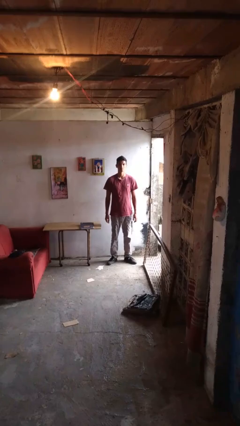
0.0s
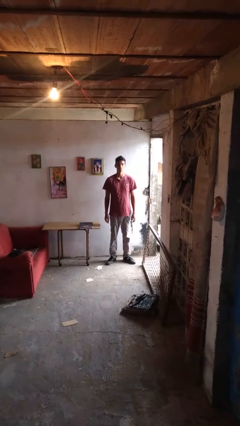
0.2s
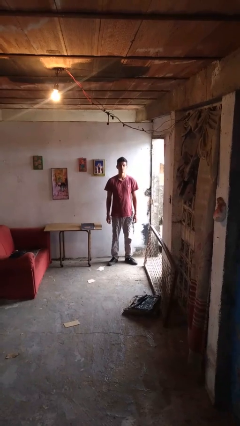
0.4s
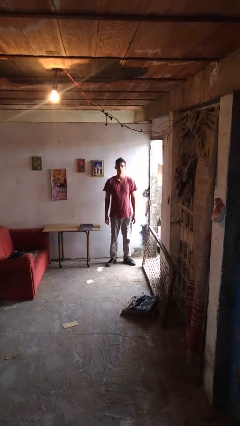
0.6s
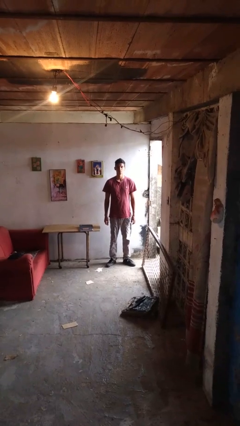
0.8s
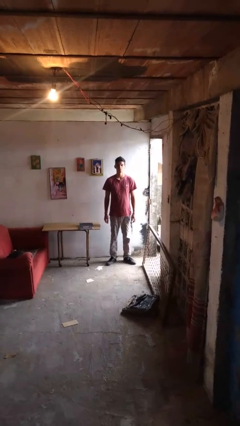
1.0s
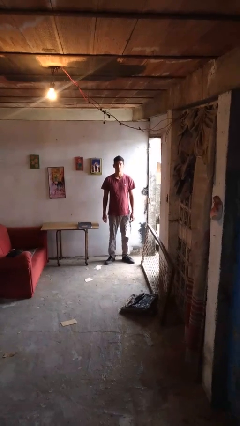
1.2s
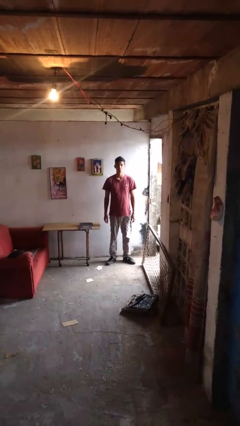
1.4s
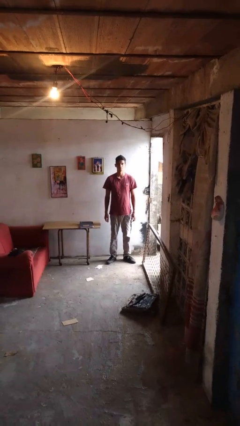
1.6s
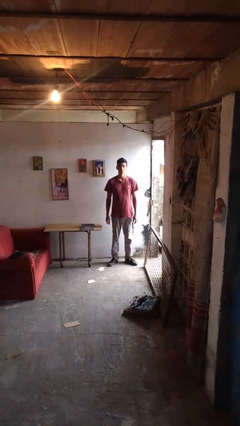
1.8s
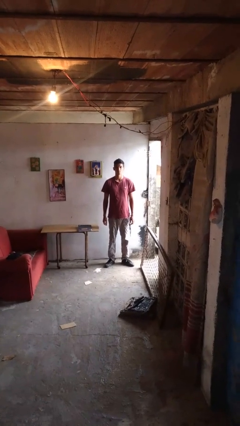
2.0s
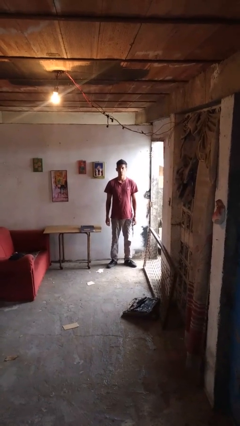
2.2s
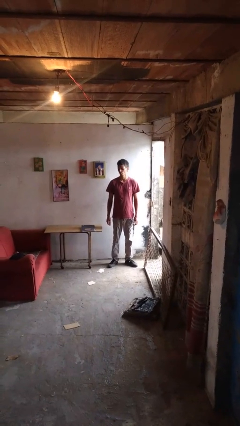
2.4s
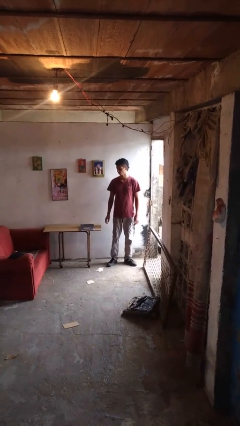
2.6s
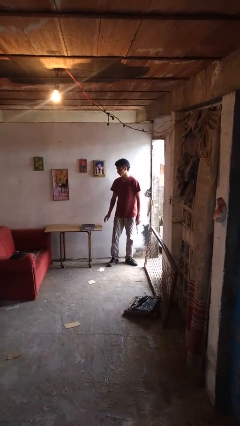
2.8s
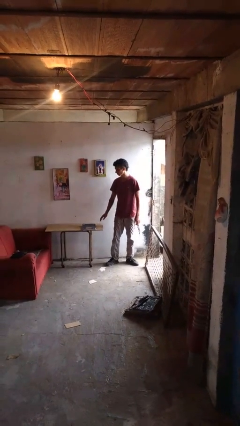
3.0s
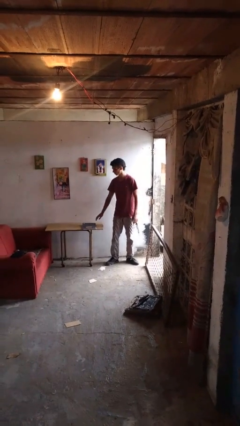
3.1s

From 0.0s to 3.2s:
person drops object

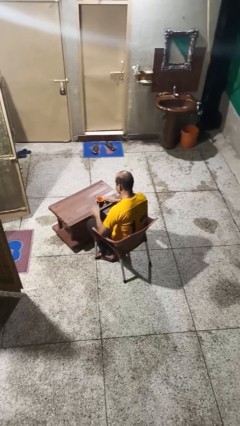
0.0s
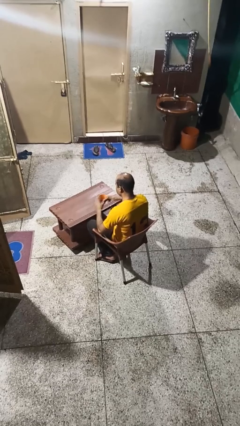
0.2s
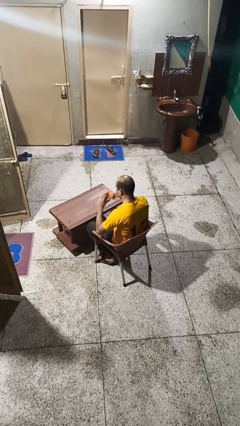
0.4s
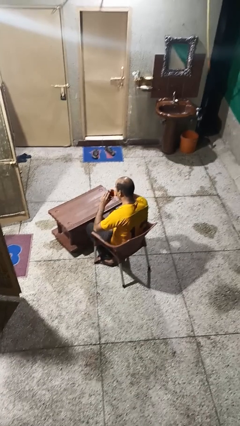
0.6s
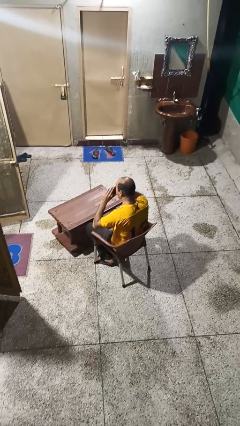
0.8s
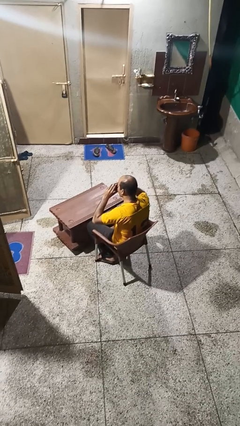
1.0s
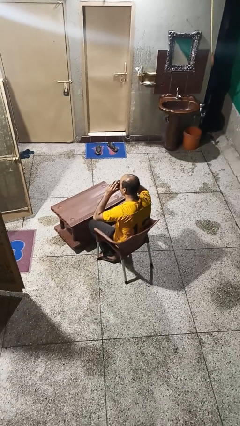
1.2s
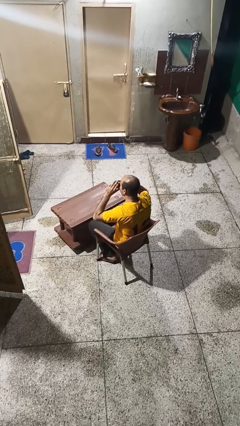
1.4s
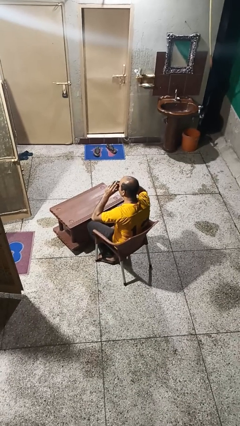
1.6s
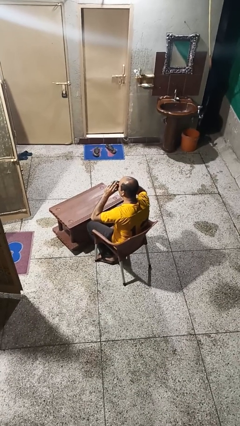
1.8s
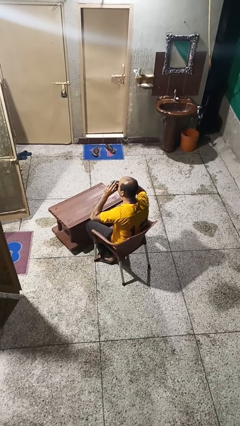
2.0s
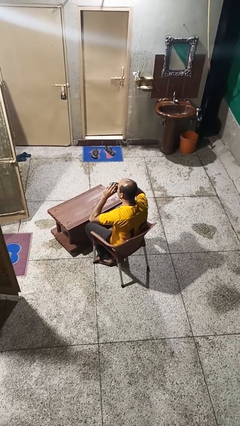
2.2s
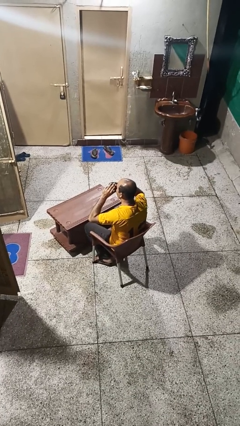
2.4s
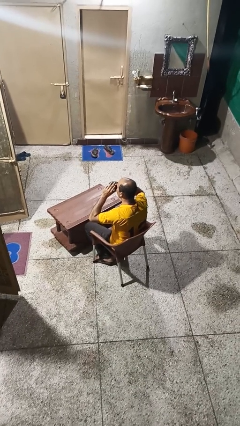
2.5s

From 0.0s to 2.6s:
person drinks from mug

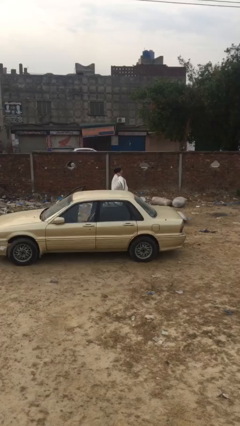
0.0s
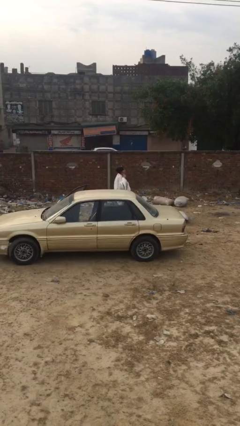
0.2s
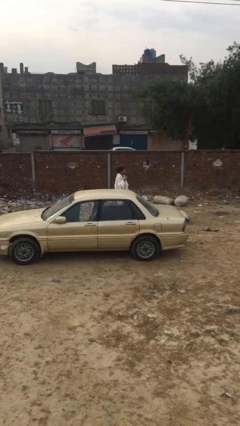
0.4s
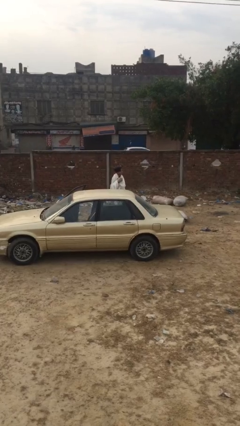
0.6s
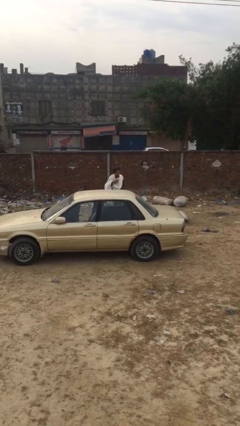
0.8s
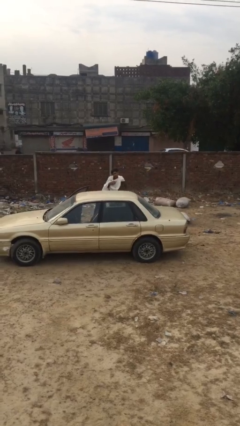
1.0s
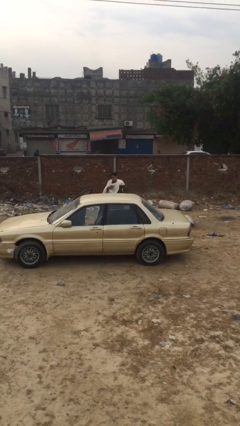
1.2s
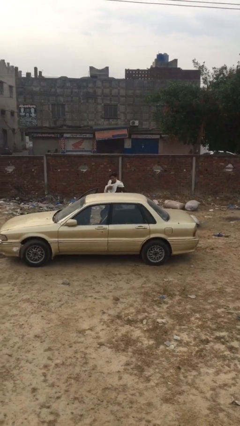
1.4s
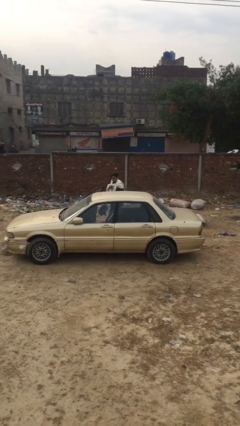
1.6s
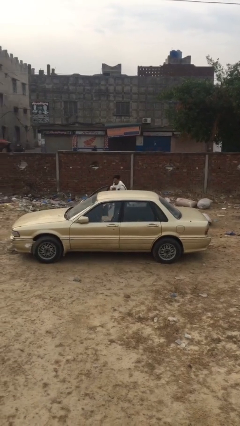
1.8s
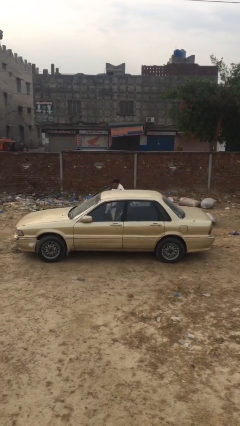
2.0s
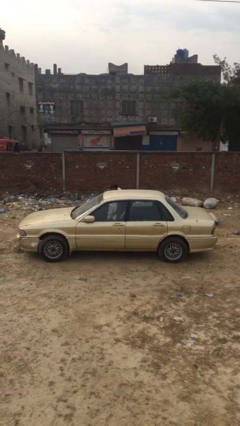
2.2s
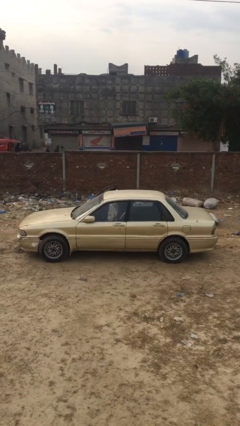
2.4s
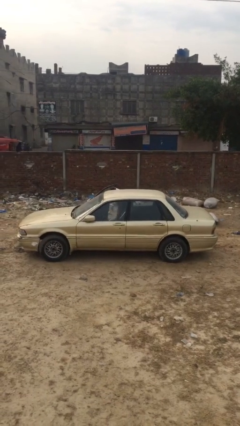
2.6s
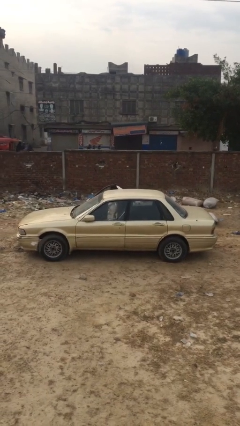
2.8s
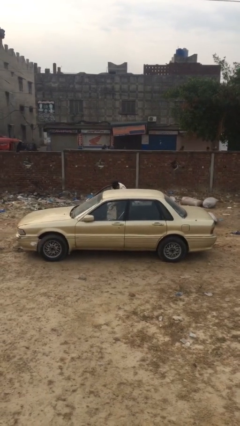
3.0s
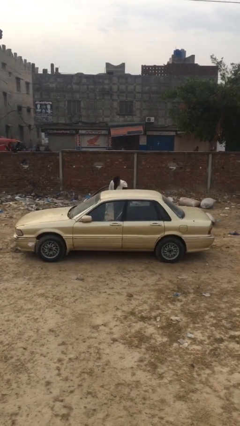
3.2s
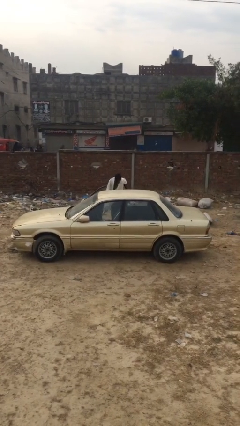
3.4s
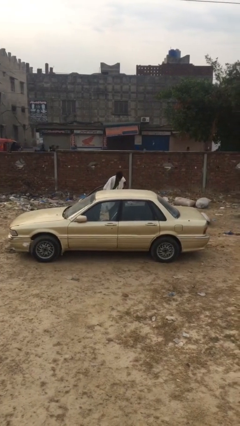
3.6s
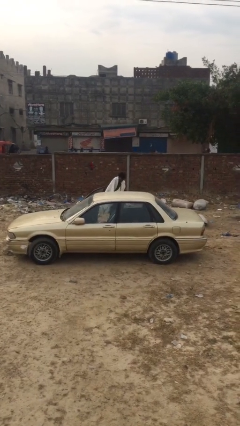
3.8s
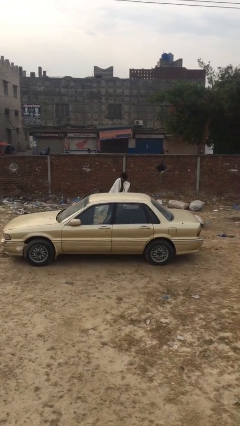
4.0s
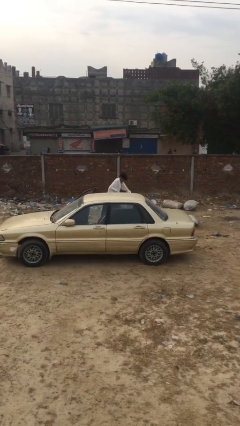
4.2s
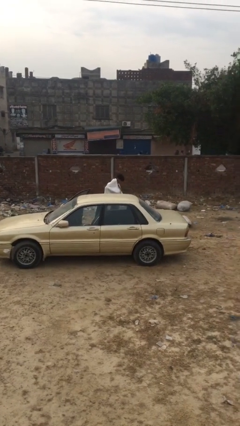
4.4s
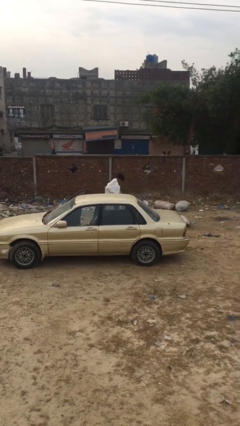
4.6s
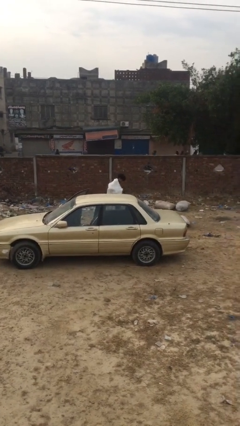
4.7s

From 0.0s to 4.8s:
person loads car

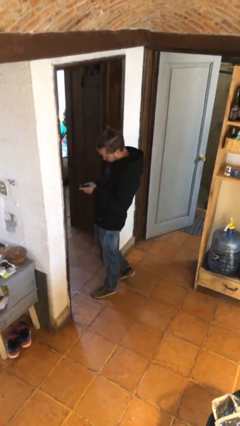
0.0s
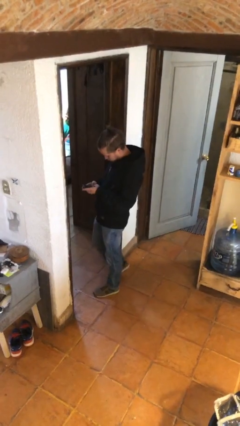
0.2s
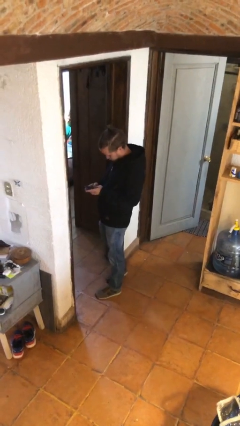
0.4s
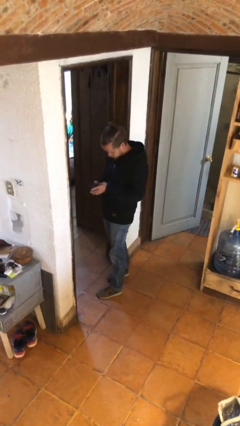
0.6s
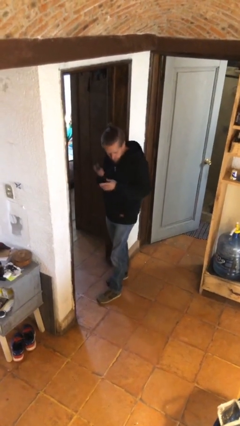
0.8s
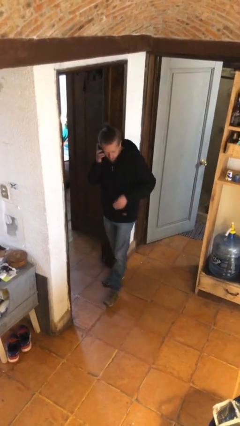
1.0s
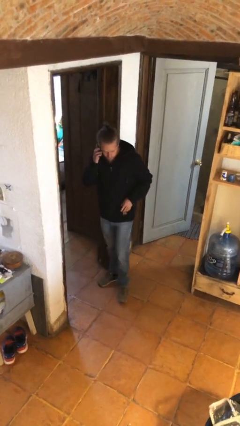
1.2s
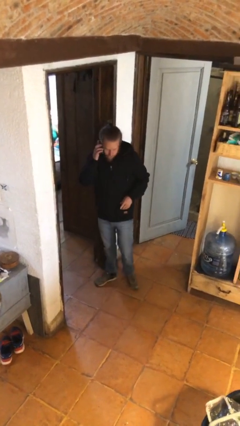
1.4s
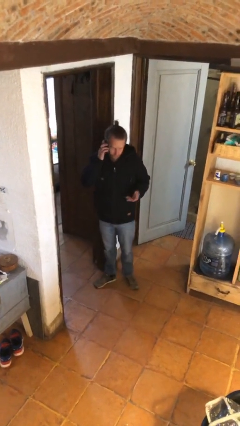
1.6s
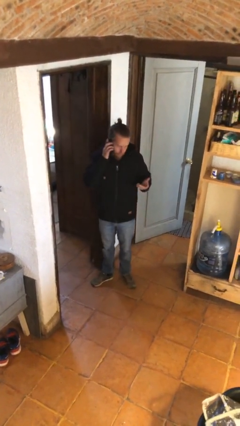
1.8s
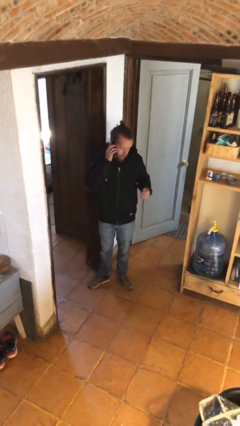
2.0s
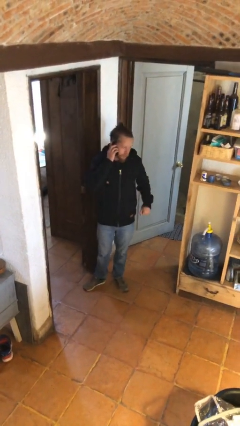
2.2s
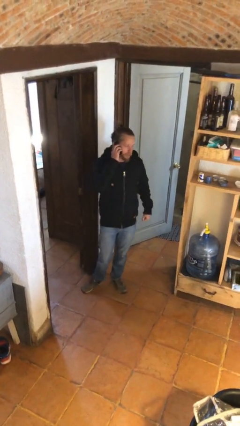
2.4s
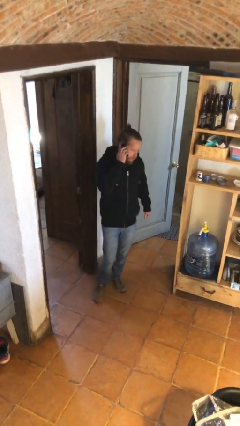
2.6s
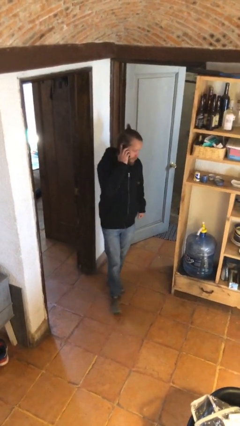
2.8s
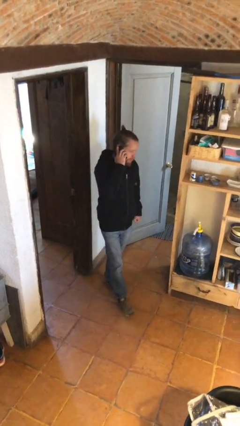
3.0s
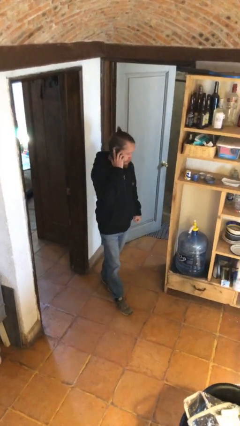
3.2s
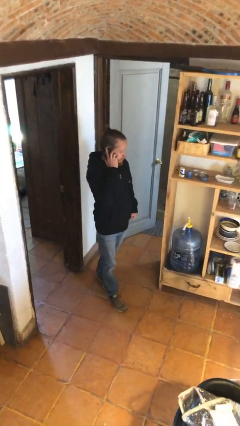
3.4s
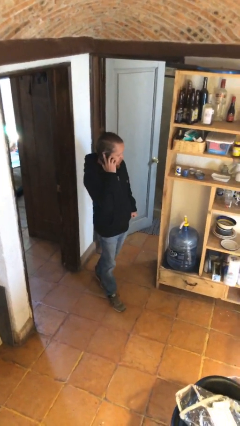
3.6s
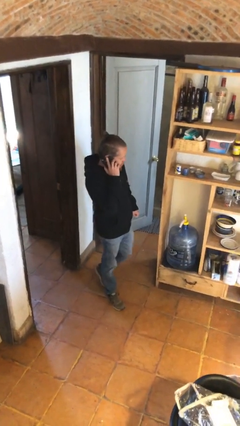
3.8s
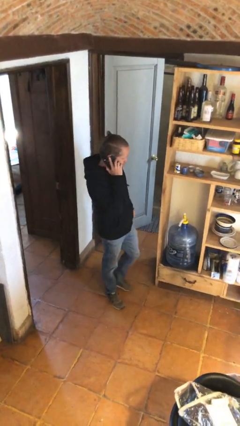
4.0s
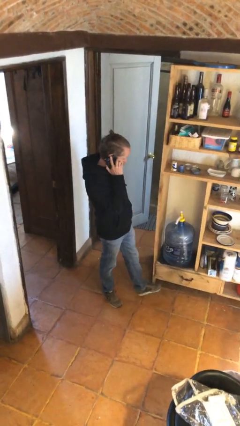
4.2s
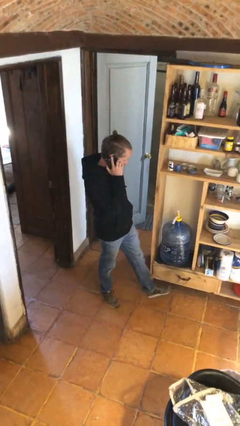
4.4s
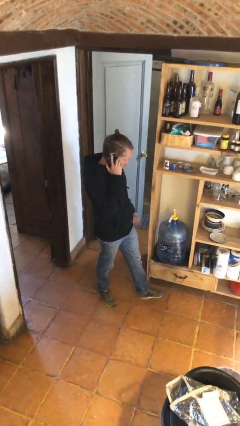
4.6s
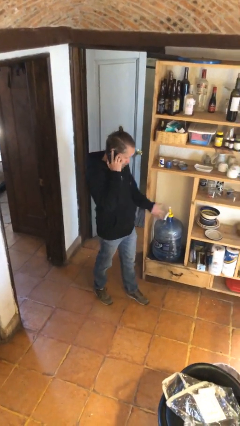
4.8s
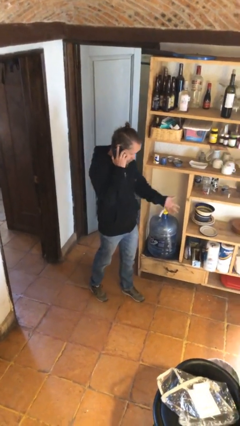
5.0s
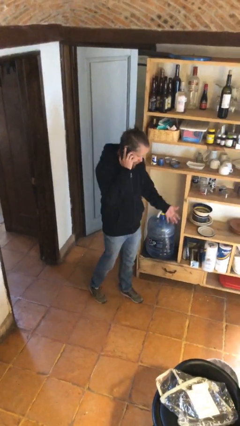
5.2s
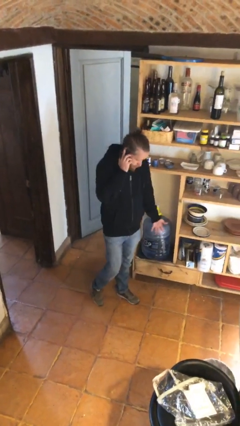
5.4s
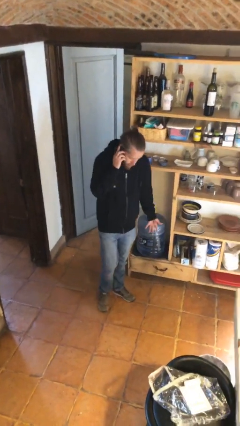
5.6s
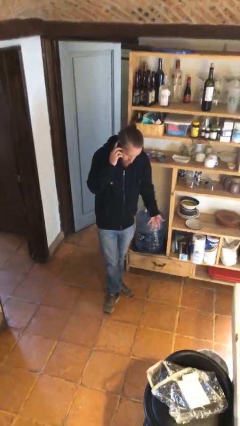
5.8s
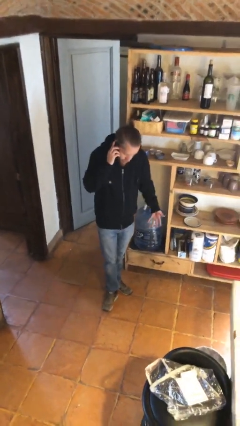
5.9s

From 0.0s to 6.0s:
person talks on phone

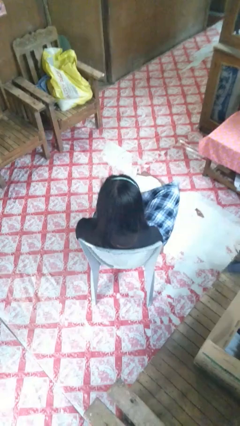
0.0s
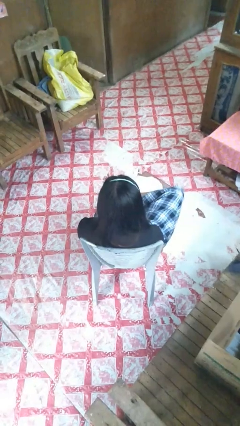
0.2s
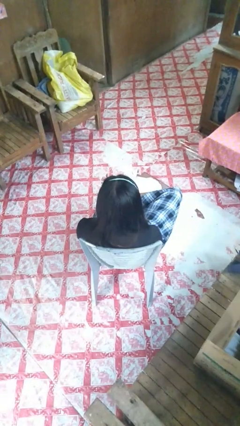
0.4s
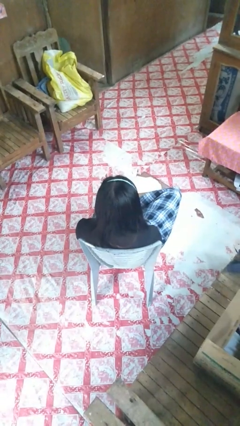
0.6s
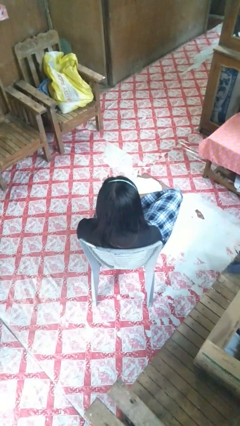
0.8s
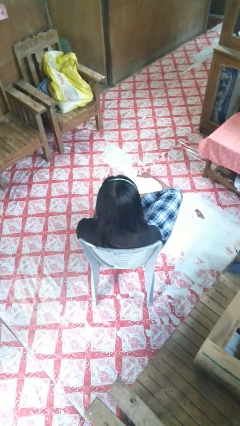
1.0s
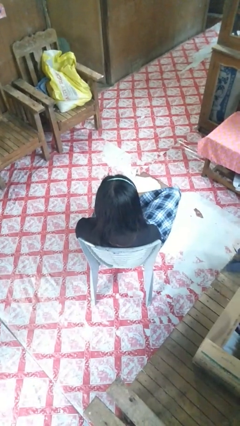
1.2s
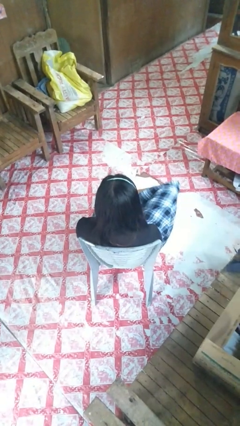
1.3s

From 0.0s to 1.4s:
person crosses legs
